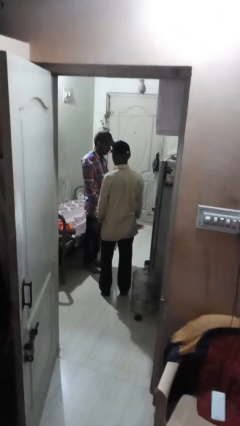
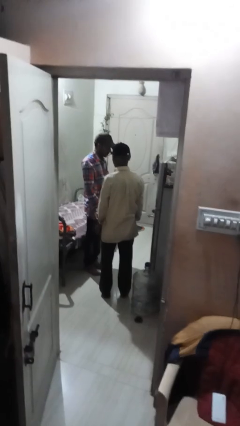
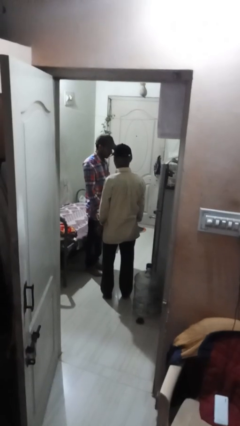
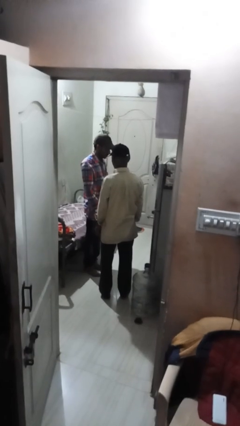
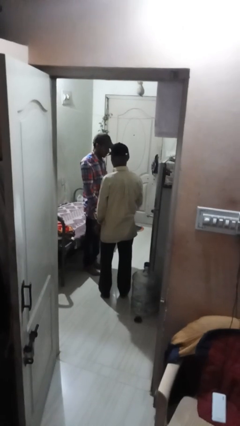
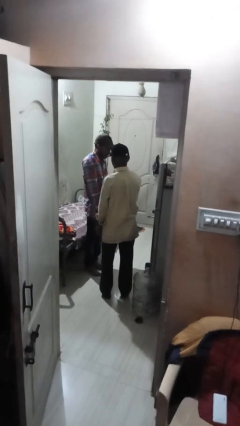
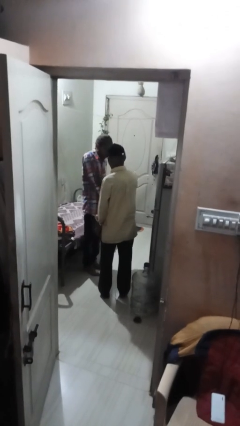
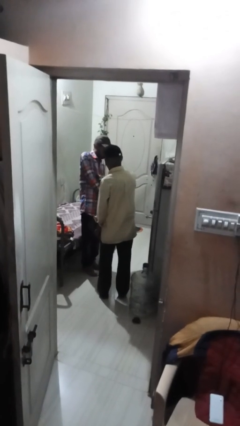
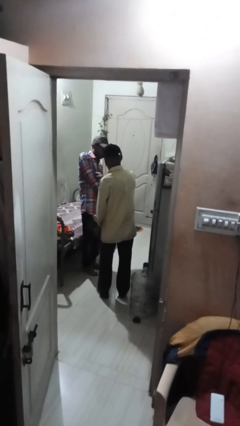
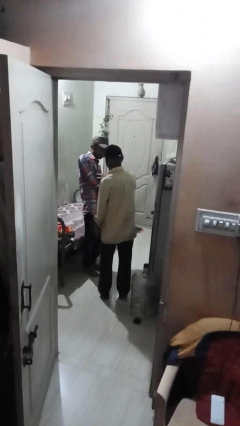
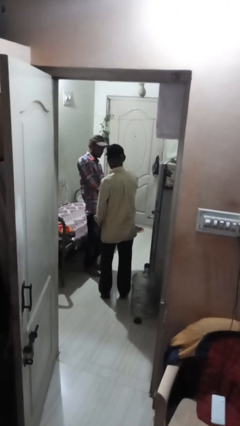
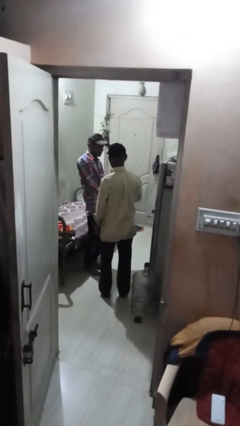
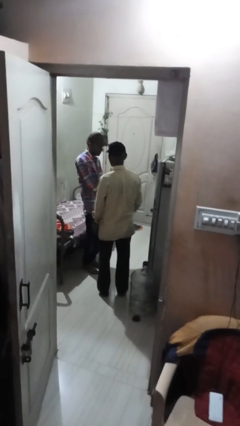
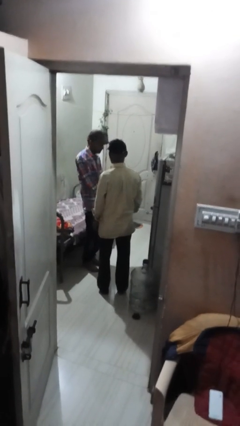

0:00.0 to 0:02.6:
person tickles person

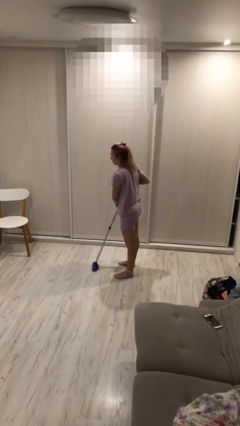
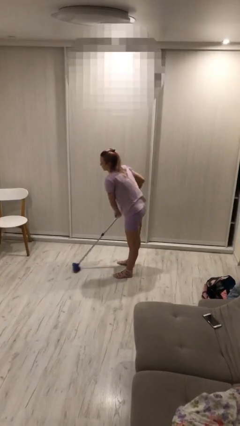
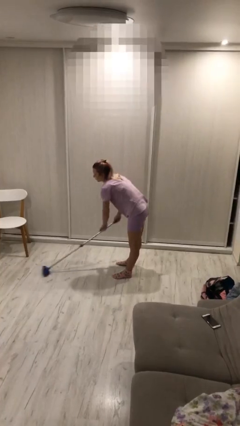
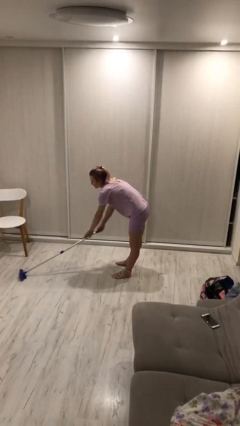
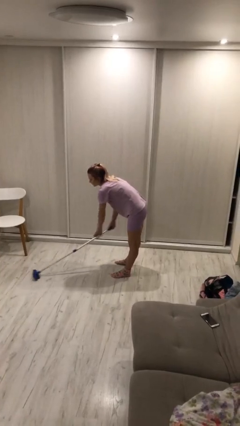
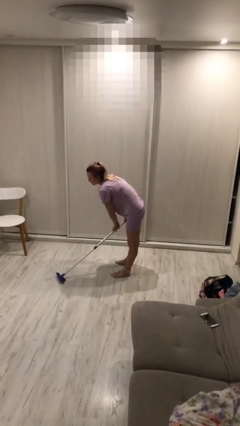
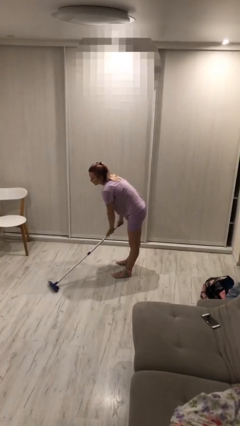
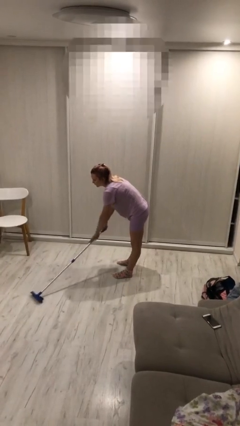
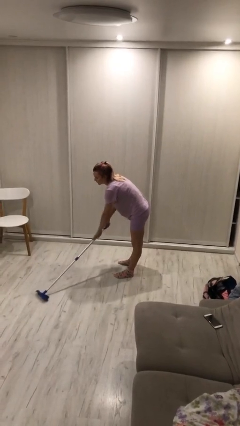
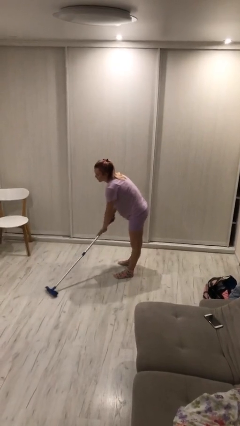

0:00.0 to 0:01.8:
person mops

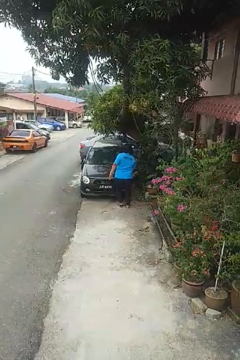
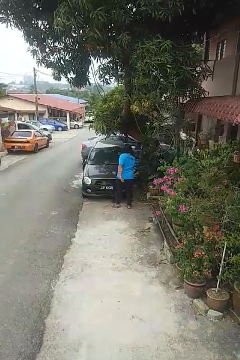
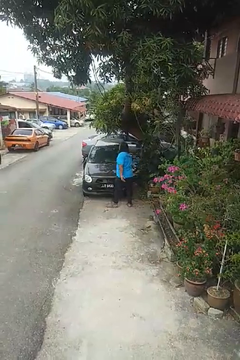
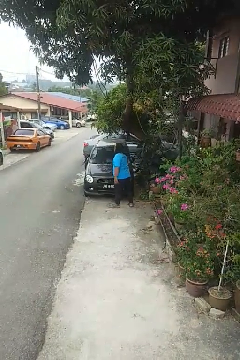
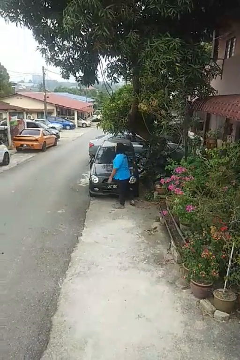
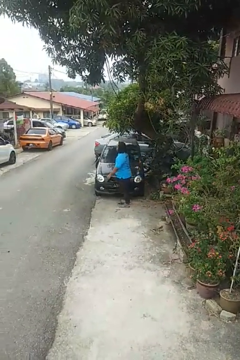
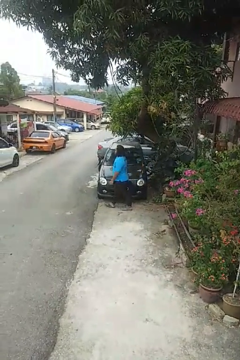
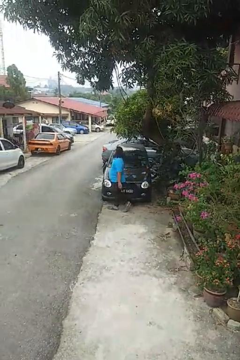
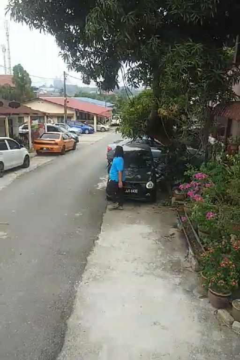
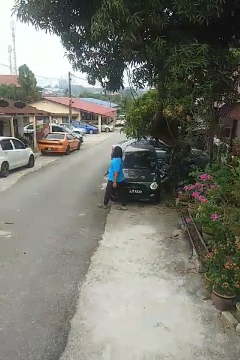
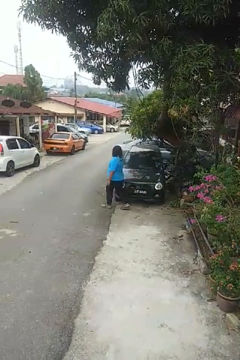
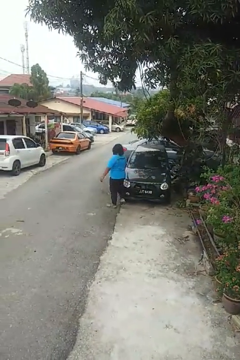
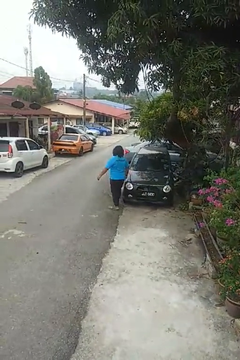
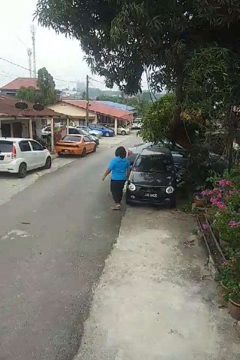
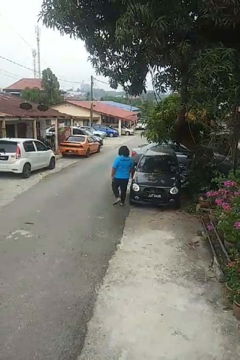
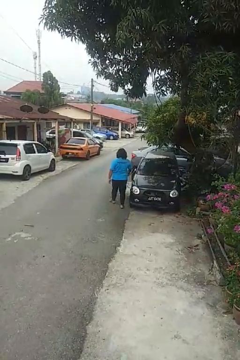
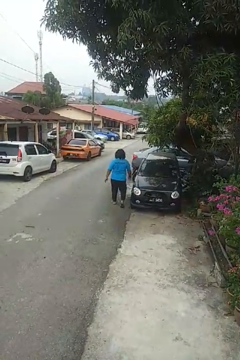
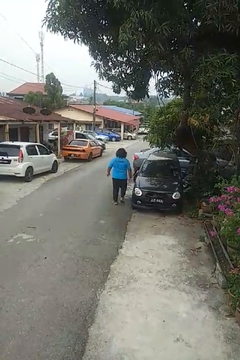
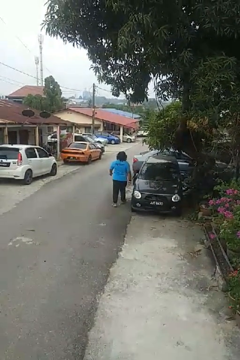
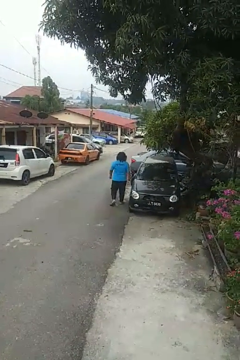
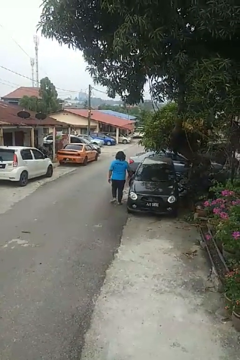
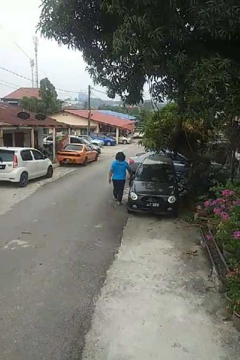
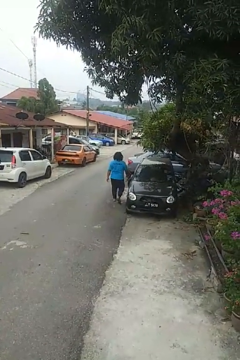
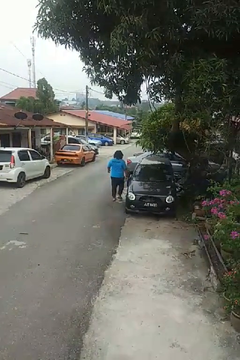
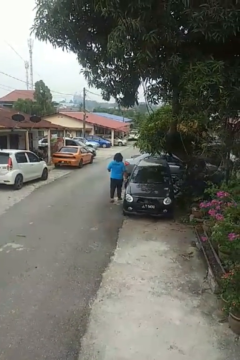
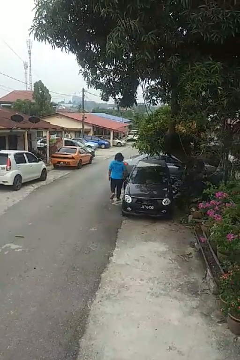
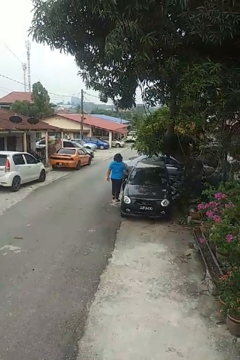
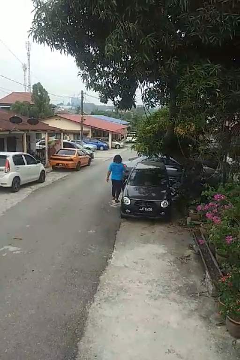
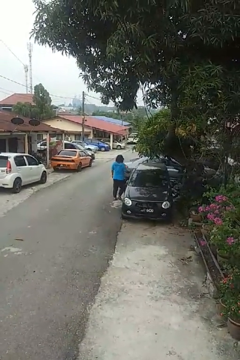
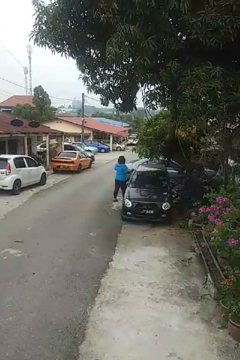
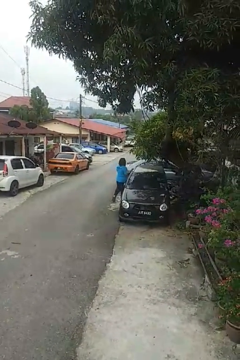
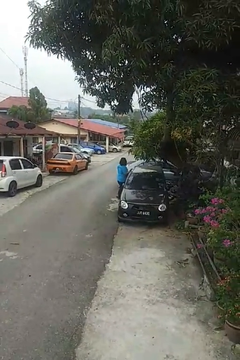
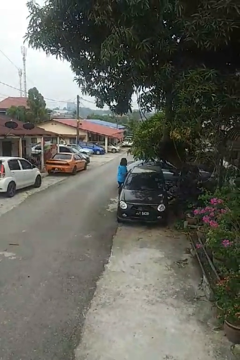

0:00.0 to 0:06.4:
person walks around car

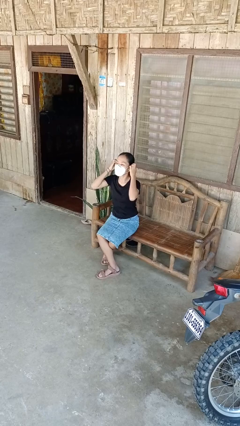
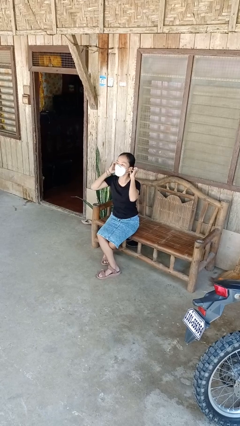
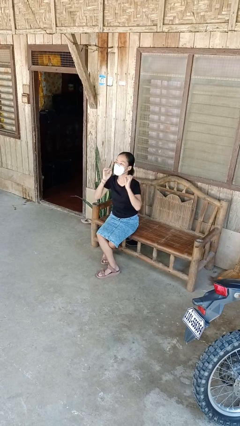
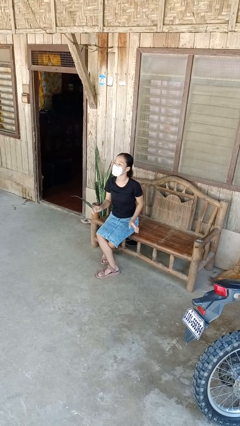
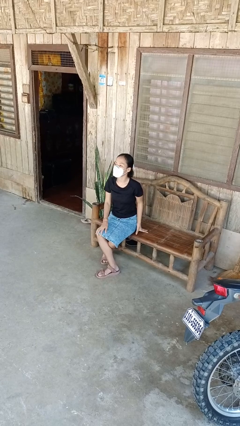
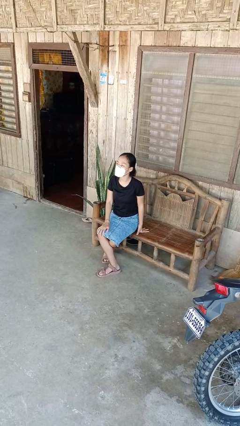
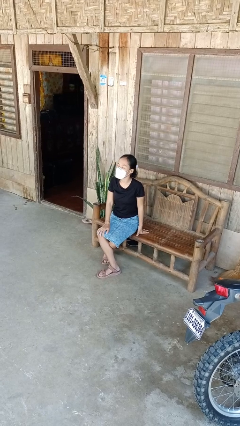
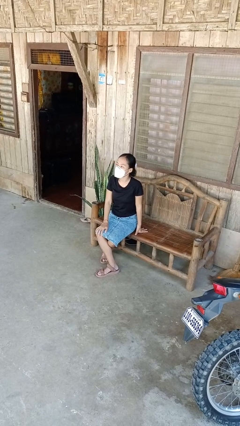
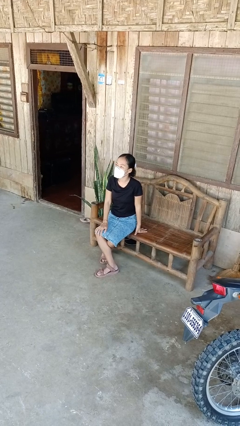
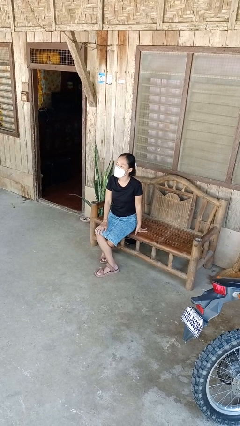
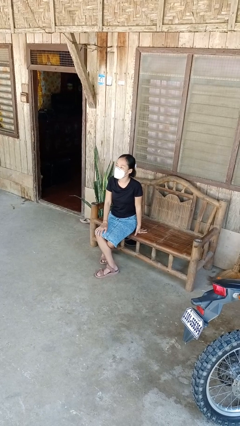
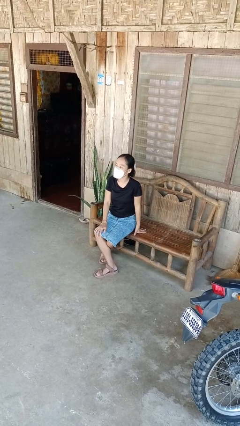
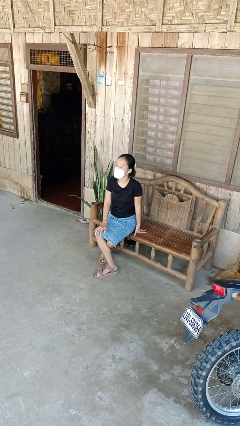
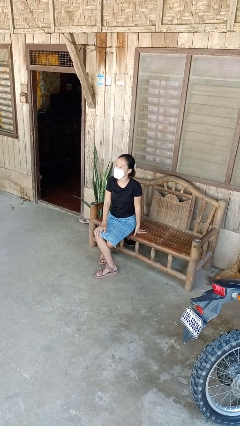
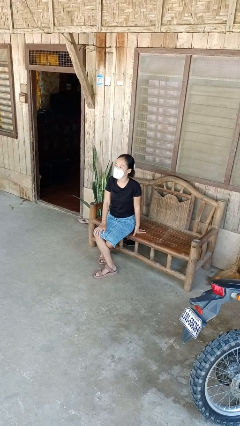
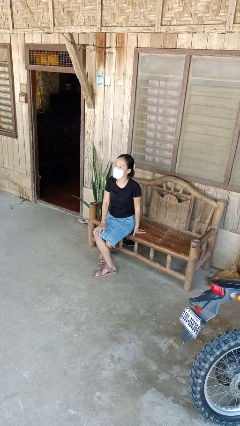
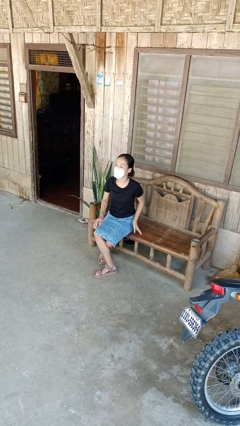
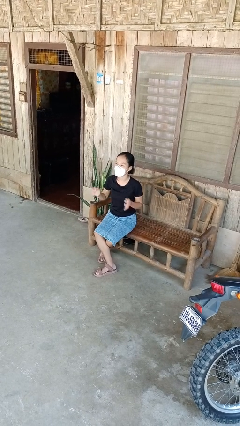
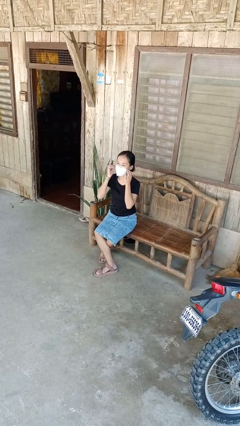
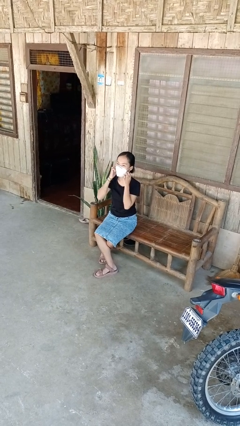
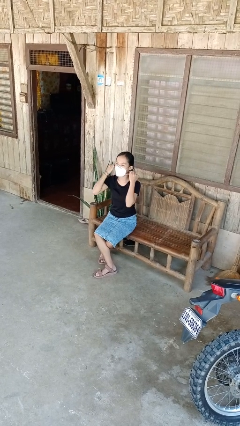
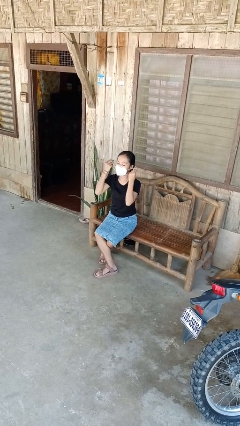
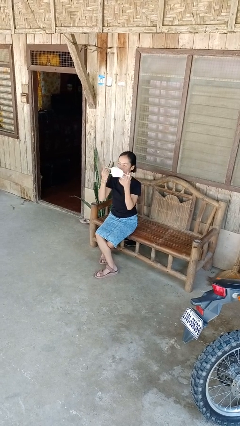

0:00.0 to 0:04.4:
person puts on facemask

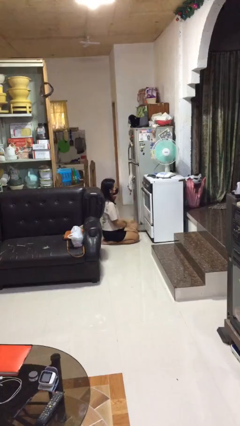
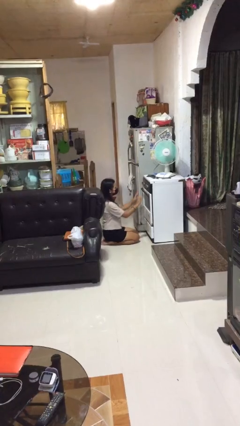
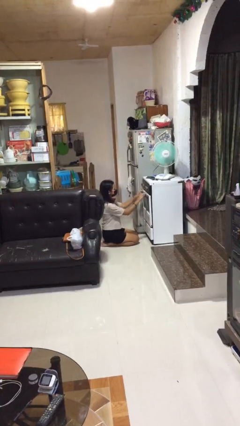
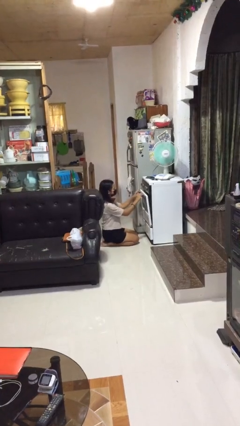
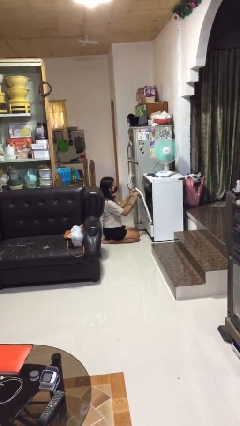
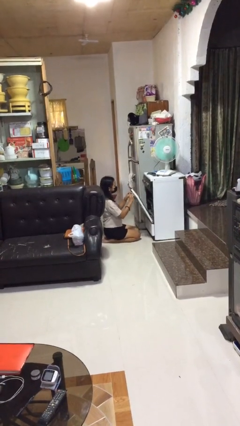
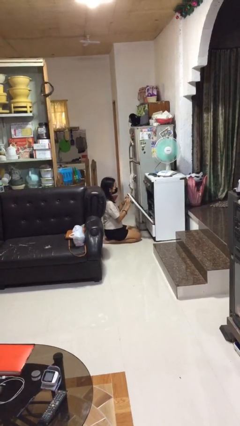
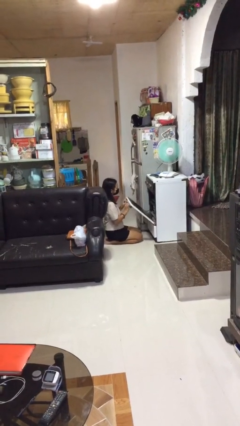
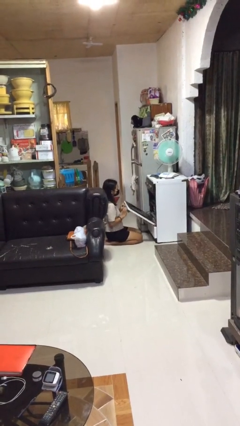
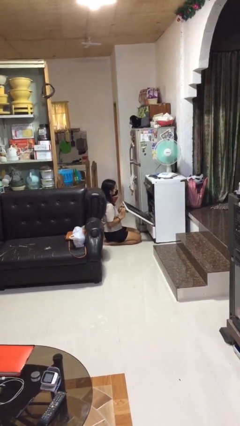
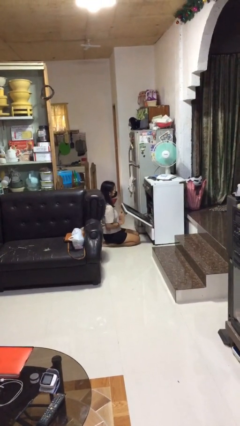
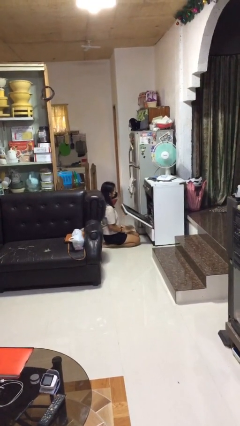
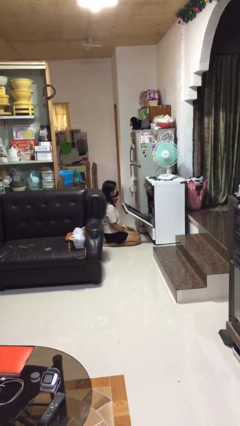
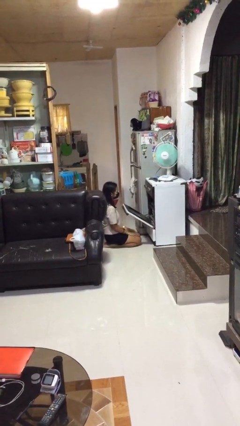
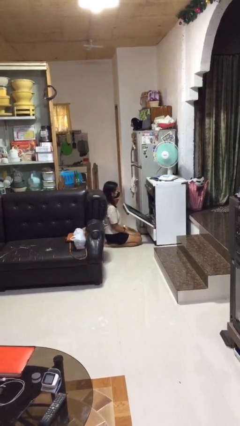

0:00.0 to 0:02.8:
person opens oven door

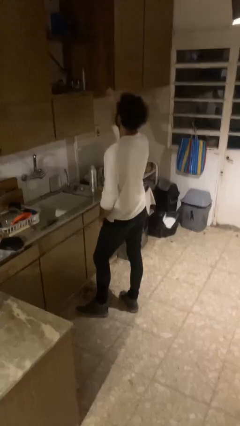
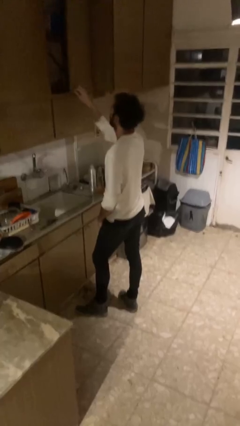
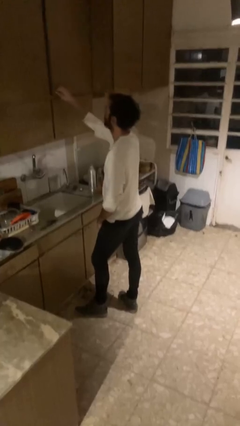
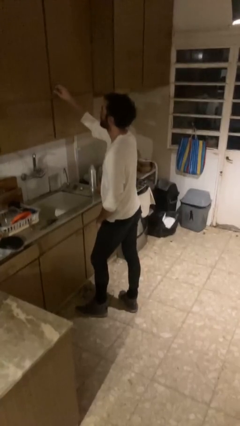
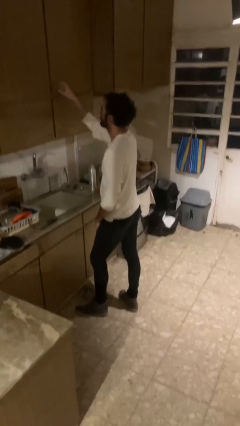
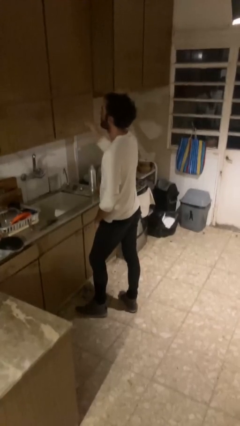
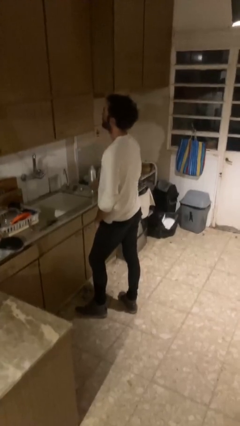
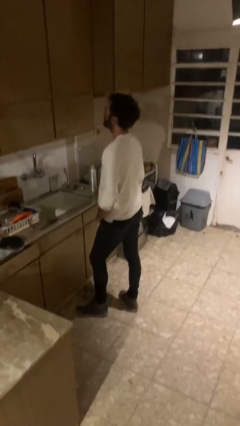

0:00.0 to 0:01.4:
person closes cabinet
